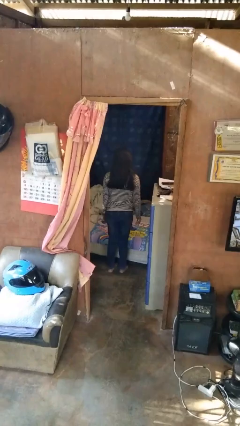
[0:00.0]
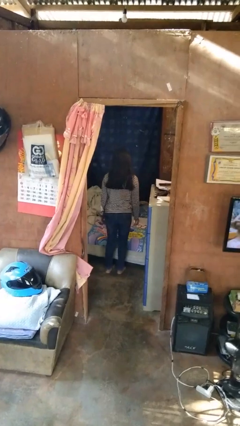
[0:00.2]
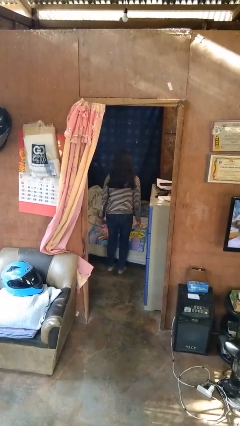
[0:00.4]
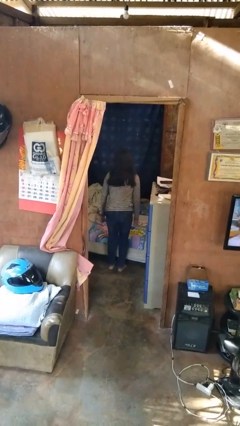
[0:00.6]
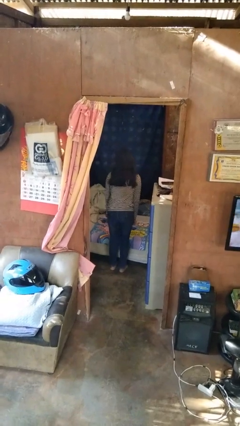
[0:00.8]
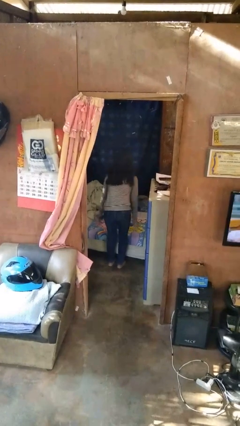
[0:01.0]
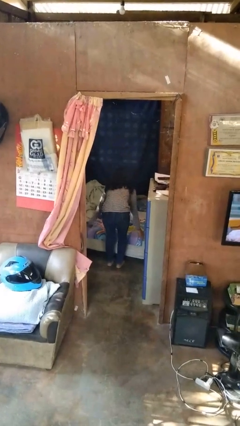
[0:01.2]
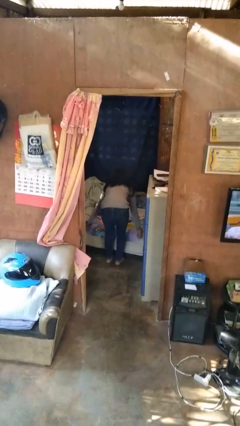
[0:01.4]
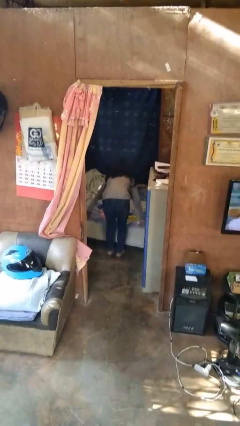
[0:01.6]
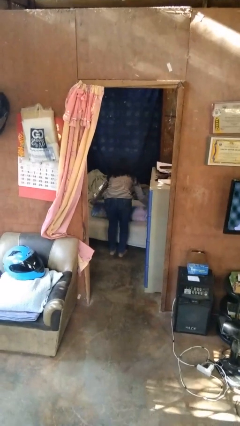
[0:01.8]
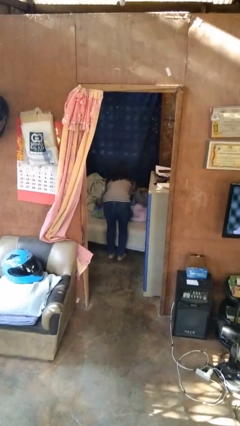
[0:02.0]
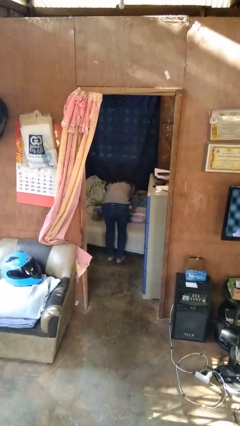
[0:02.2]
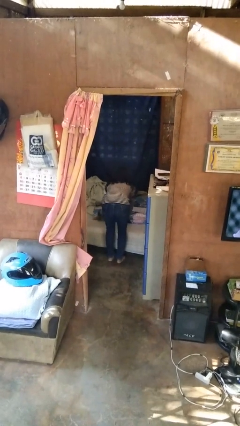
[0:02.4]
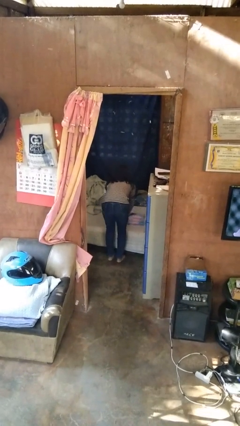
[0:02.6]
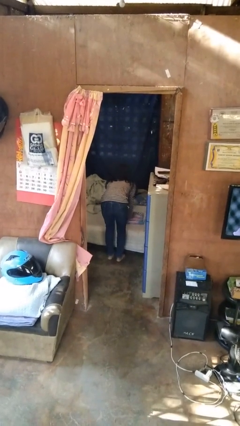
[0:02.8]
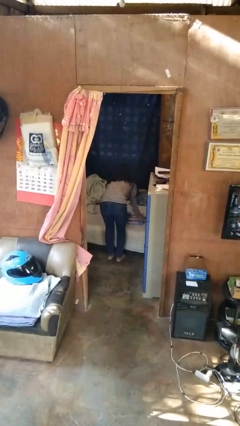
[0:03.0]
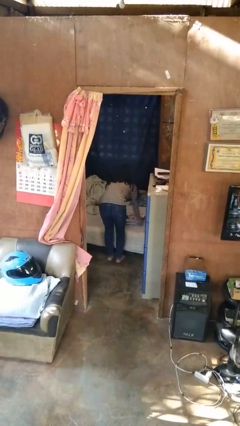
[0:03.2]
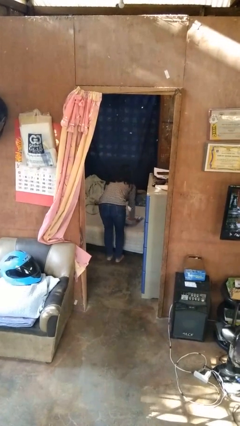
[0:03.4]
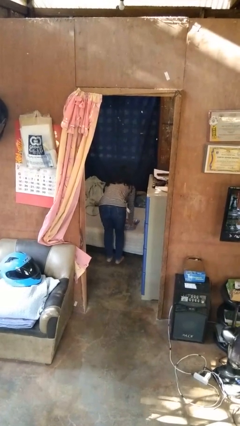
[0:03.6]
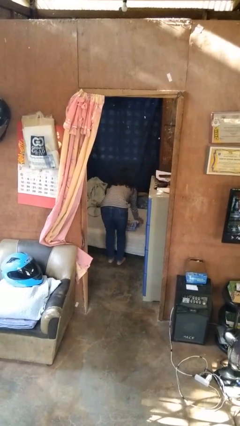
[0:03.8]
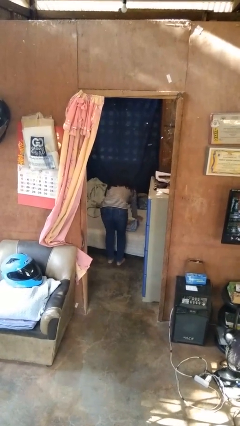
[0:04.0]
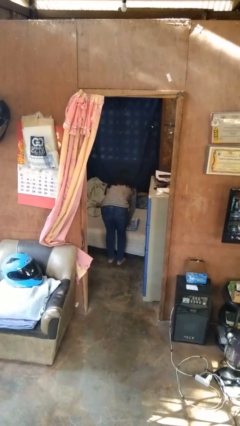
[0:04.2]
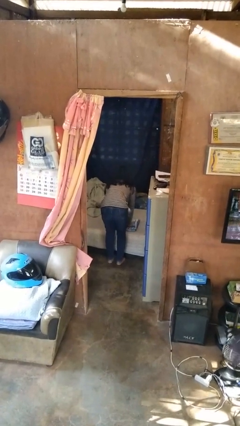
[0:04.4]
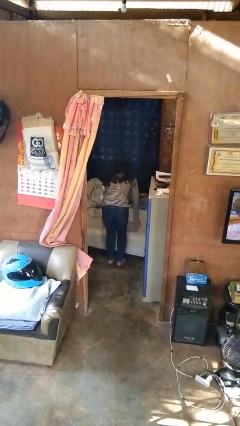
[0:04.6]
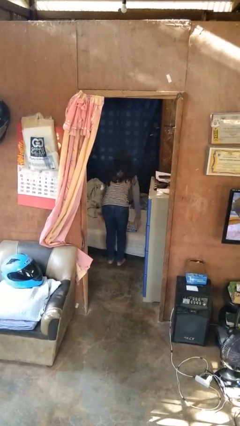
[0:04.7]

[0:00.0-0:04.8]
person folds blanket

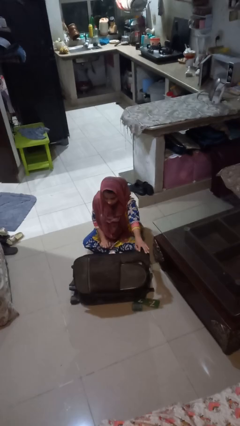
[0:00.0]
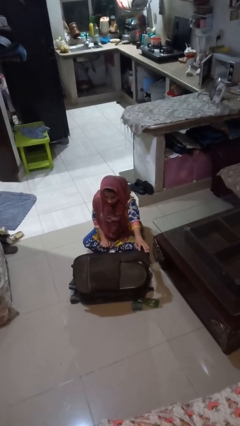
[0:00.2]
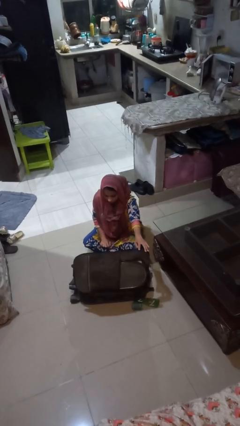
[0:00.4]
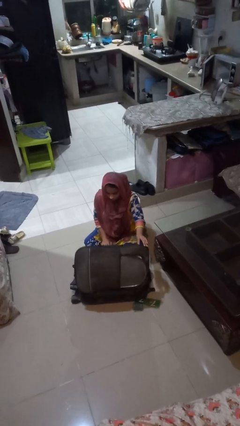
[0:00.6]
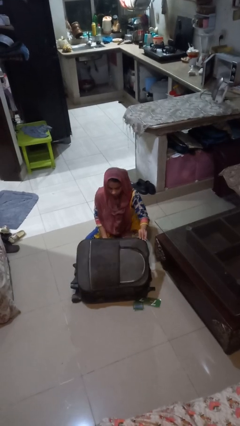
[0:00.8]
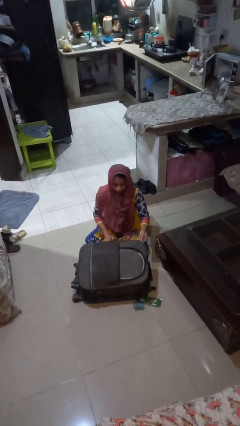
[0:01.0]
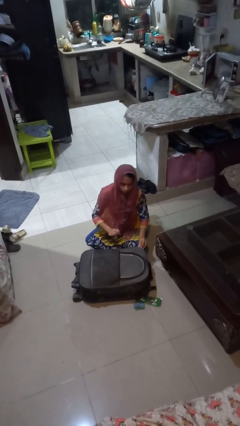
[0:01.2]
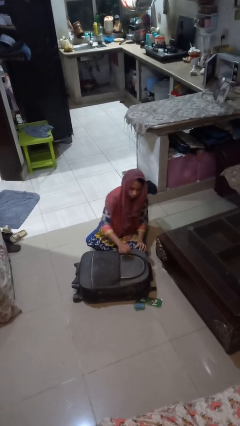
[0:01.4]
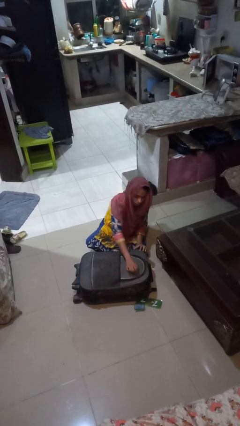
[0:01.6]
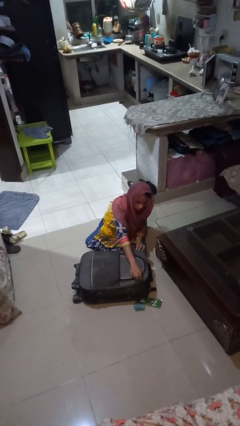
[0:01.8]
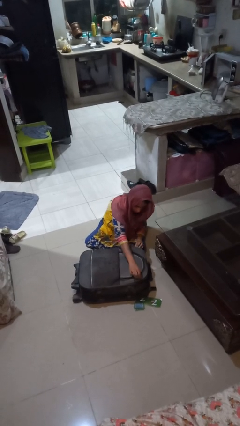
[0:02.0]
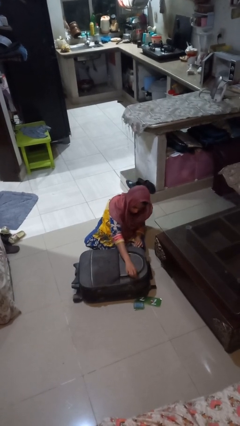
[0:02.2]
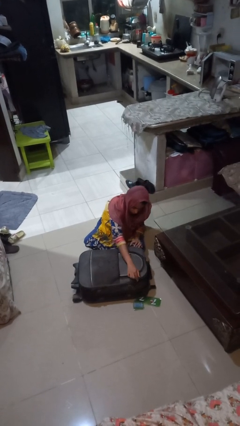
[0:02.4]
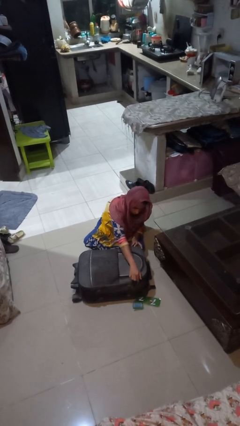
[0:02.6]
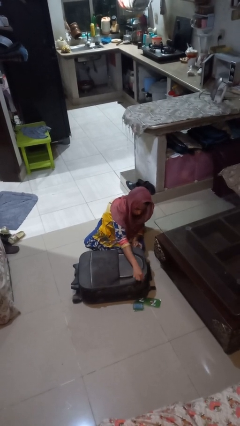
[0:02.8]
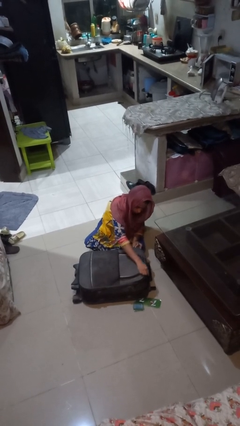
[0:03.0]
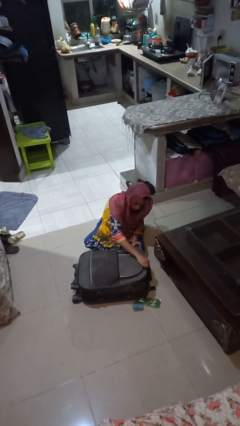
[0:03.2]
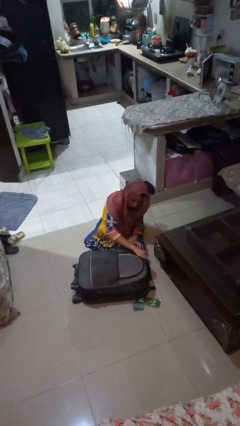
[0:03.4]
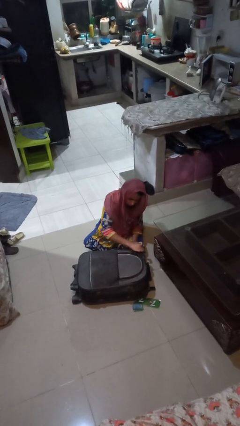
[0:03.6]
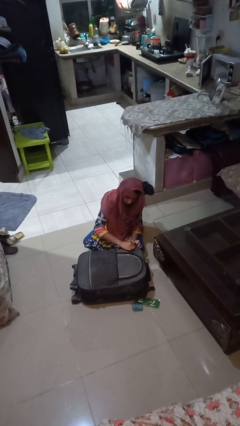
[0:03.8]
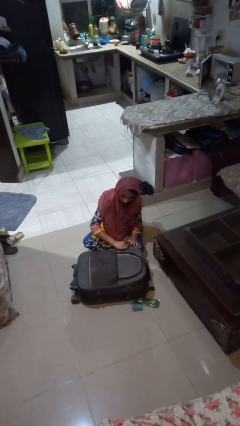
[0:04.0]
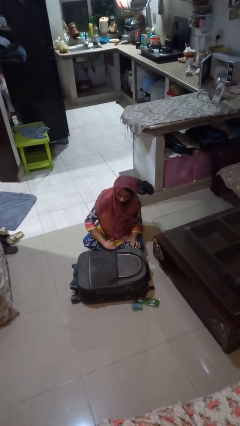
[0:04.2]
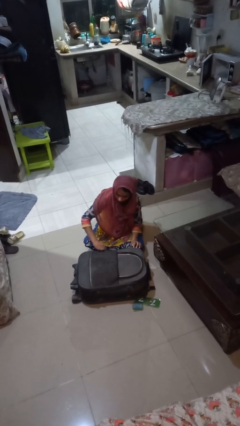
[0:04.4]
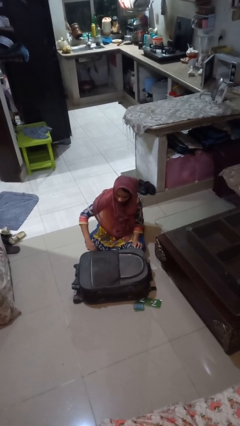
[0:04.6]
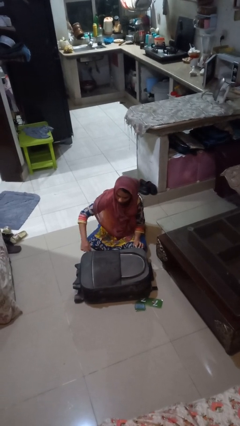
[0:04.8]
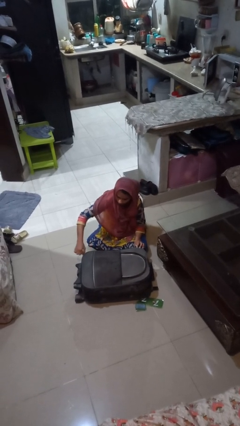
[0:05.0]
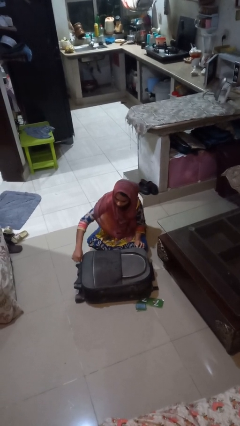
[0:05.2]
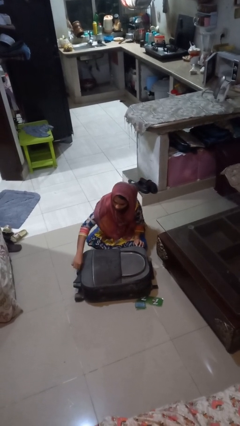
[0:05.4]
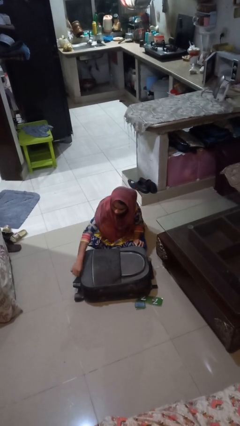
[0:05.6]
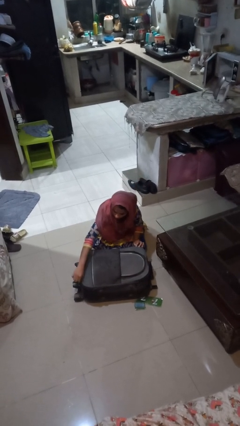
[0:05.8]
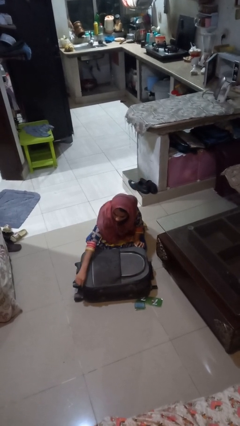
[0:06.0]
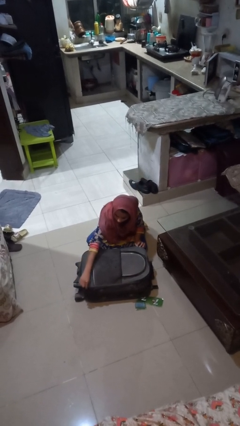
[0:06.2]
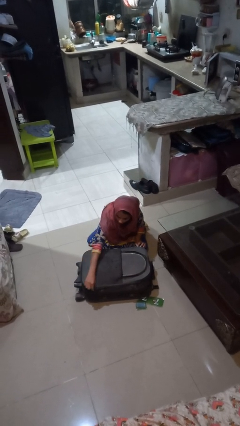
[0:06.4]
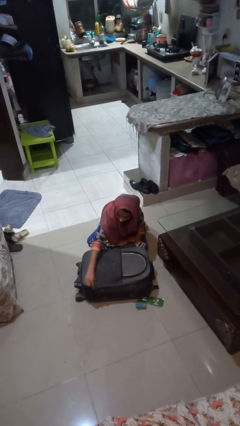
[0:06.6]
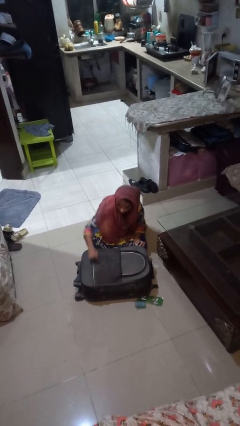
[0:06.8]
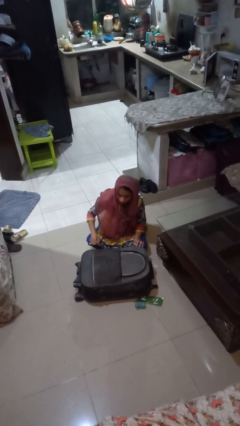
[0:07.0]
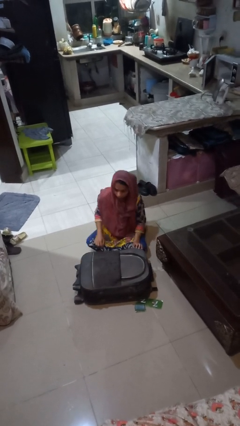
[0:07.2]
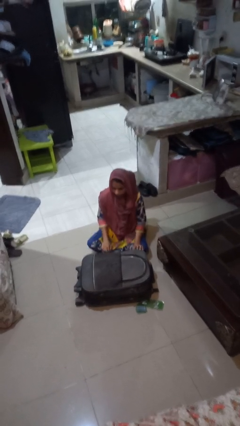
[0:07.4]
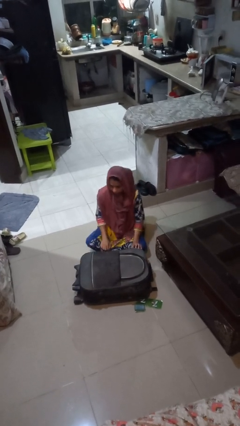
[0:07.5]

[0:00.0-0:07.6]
person closes suitcase

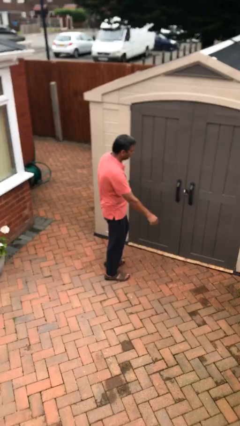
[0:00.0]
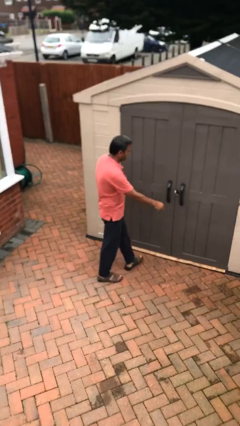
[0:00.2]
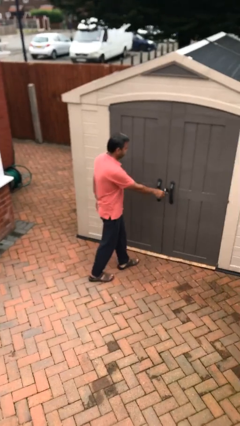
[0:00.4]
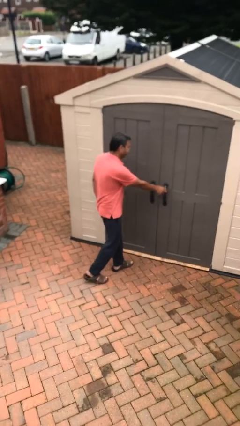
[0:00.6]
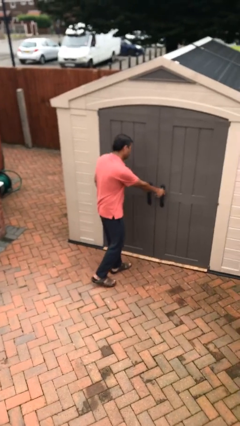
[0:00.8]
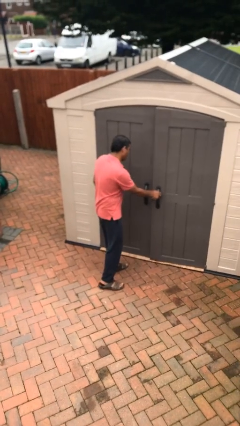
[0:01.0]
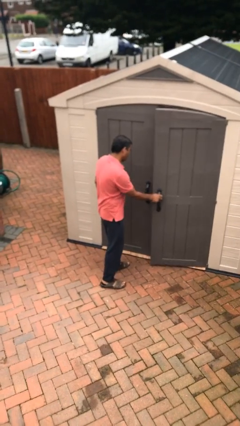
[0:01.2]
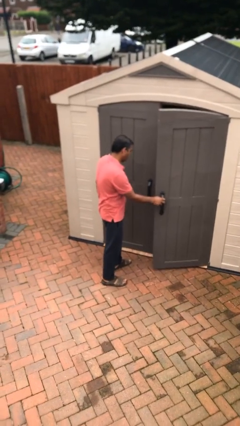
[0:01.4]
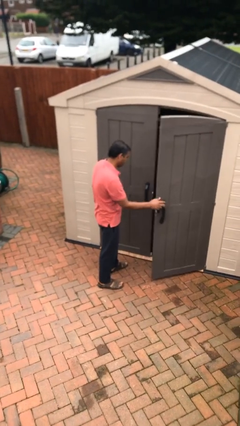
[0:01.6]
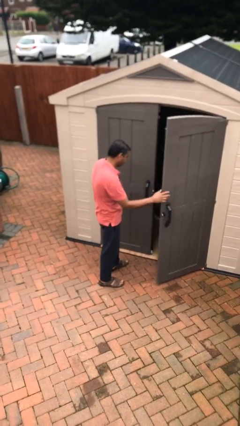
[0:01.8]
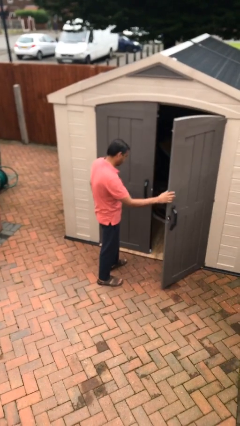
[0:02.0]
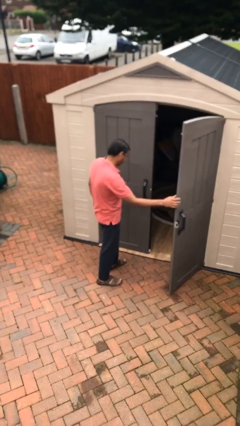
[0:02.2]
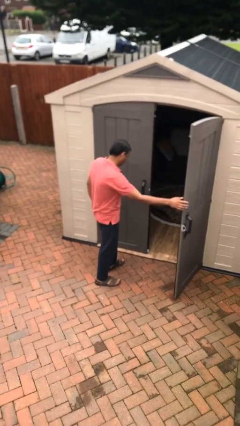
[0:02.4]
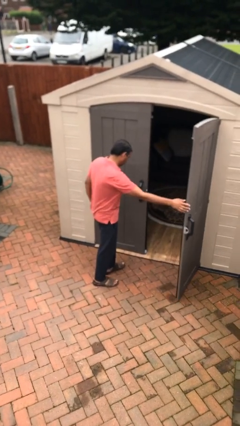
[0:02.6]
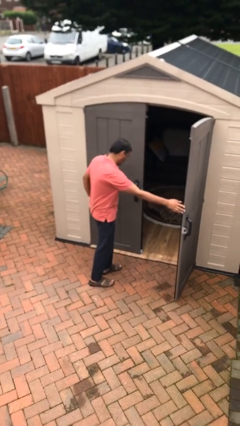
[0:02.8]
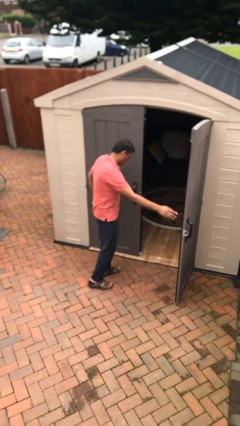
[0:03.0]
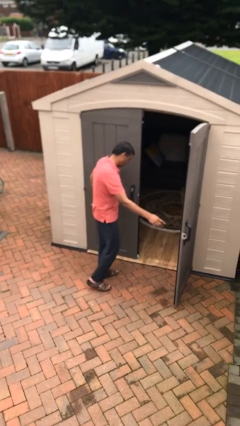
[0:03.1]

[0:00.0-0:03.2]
person opens facility door

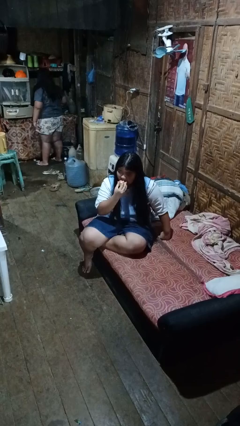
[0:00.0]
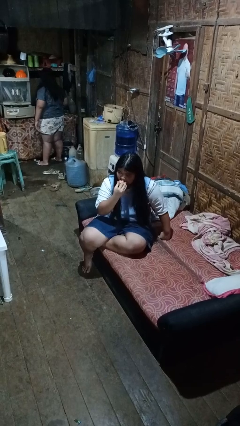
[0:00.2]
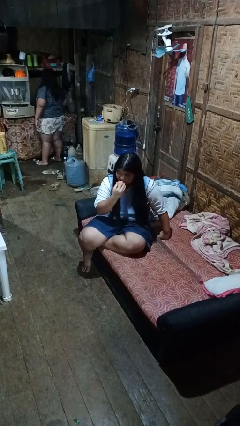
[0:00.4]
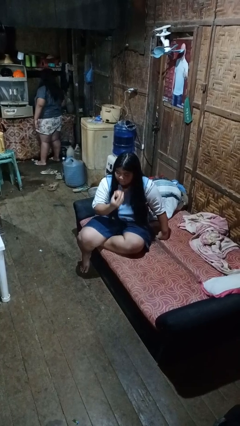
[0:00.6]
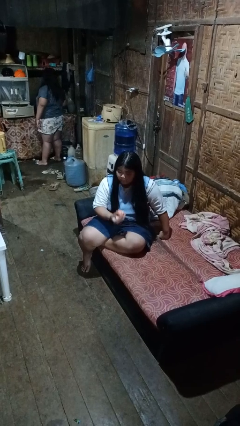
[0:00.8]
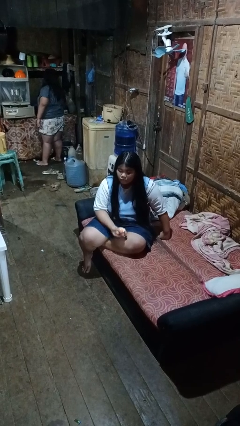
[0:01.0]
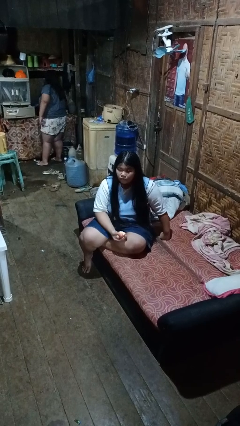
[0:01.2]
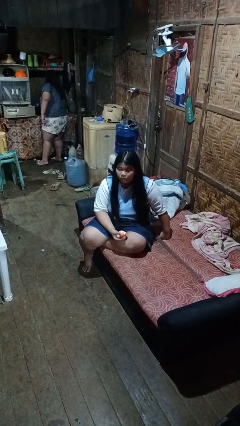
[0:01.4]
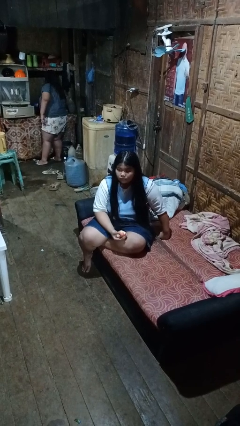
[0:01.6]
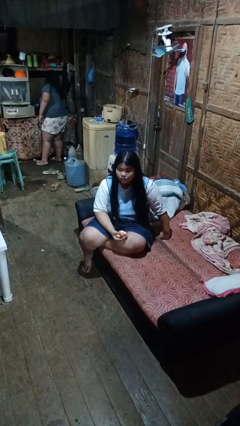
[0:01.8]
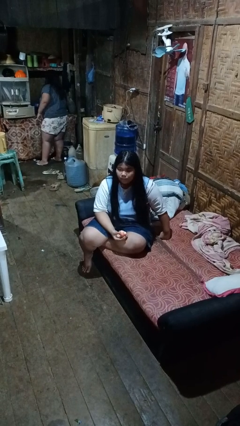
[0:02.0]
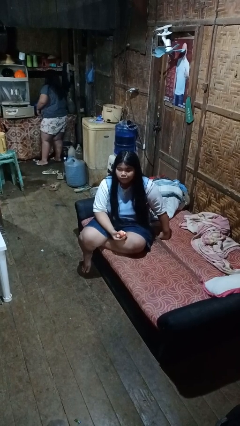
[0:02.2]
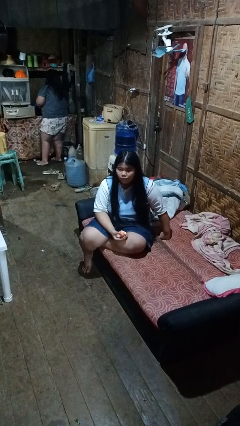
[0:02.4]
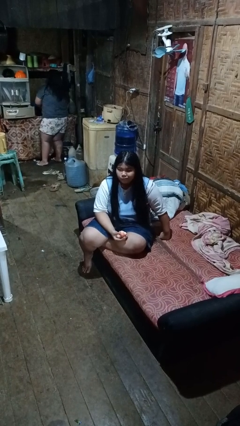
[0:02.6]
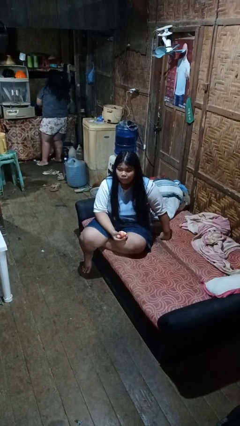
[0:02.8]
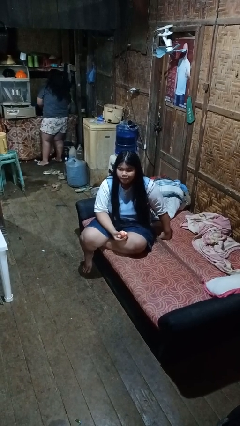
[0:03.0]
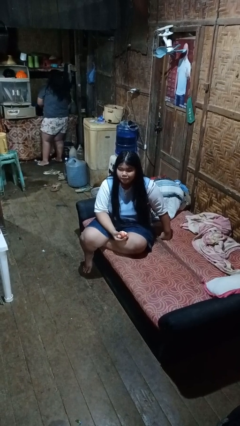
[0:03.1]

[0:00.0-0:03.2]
person eats apple
